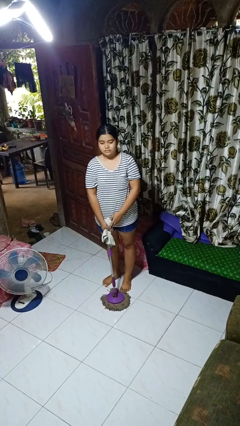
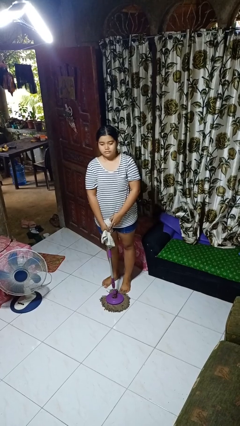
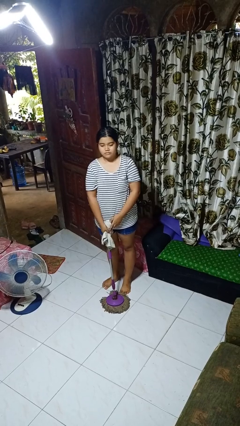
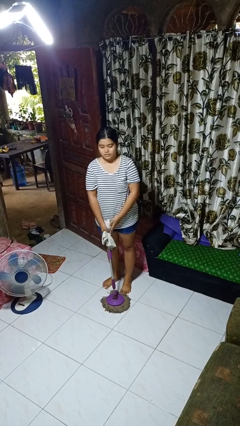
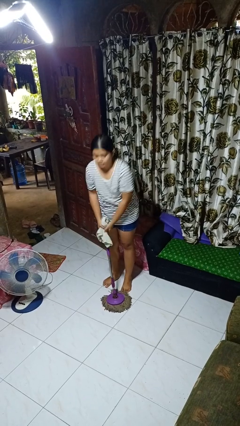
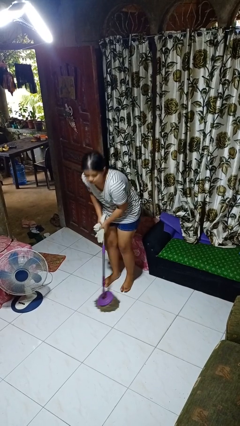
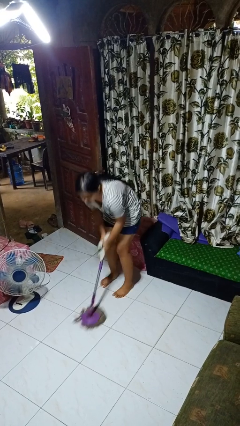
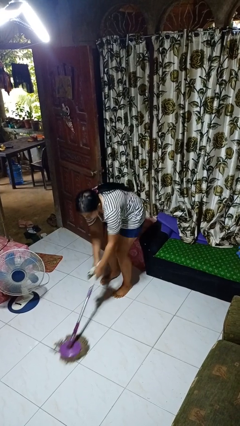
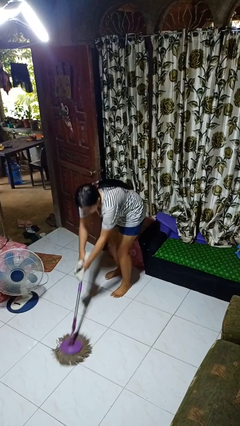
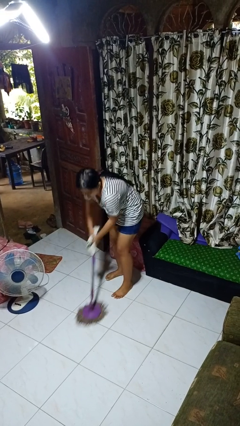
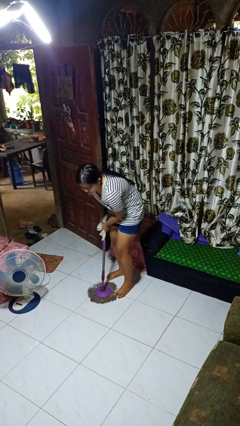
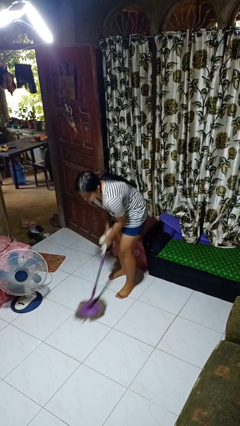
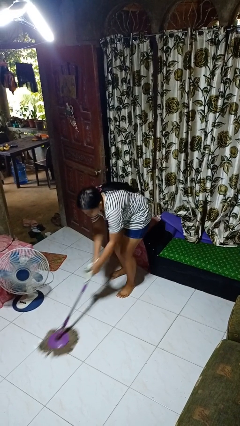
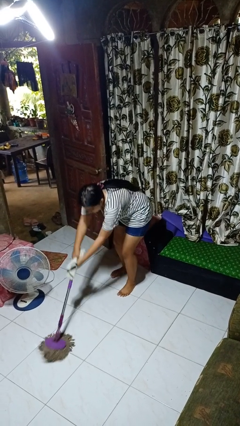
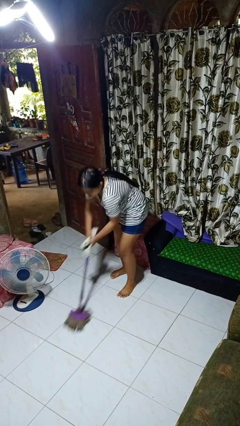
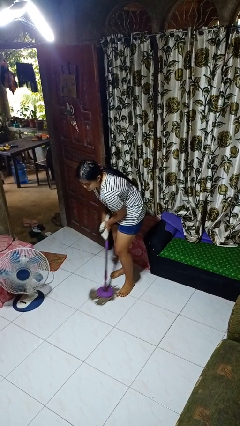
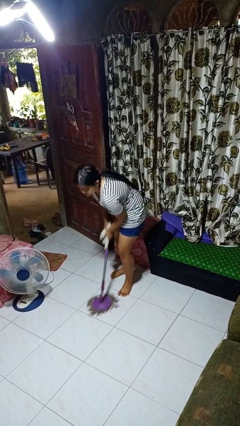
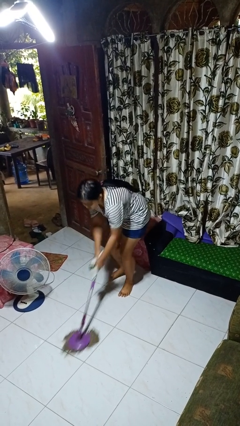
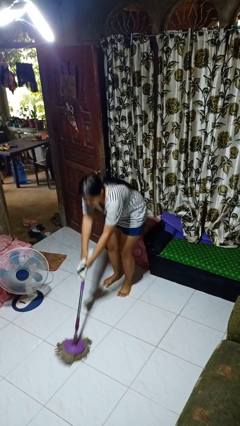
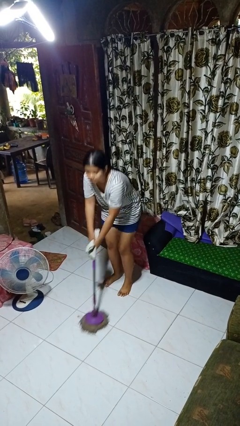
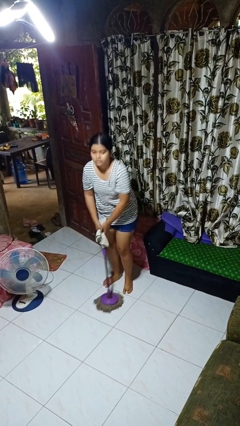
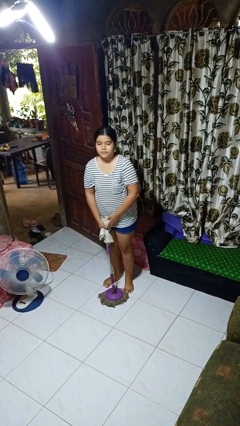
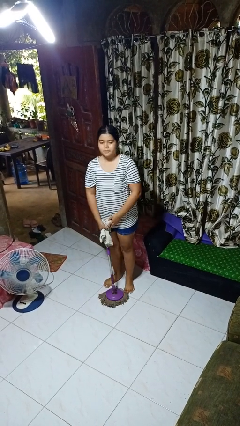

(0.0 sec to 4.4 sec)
person mops

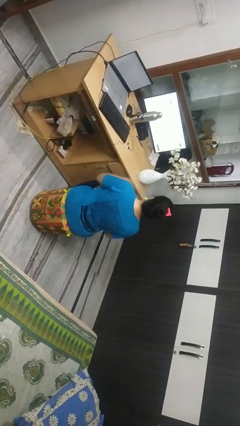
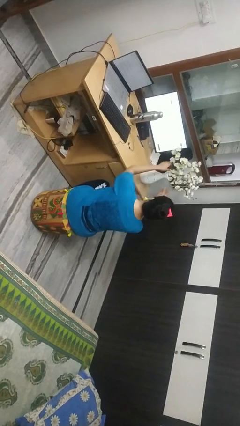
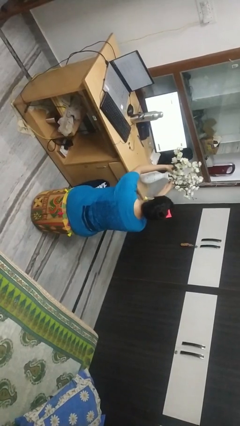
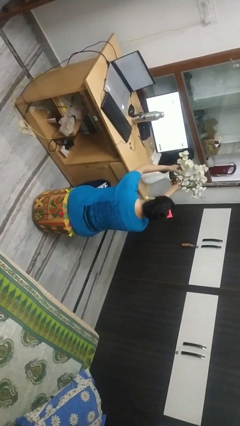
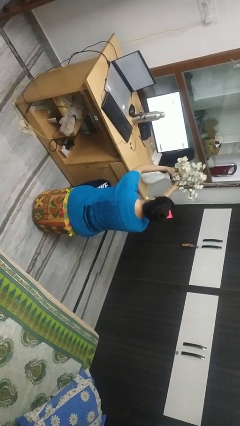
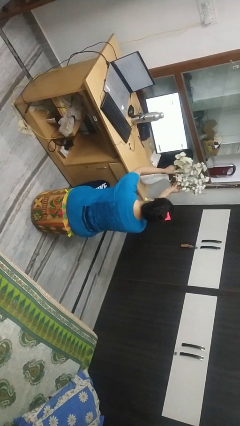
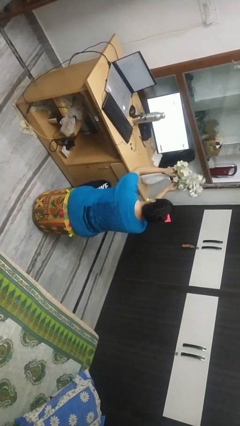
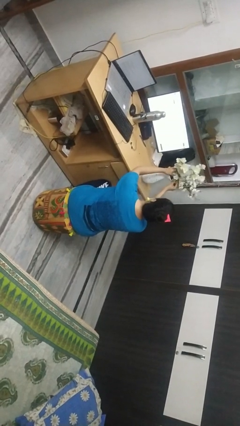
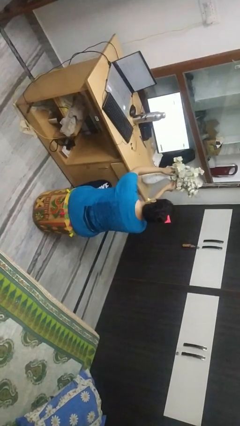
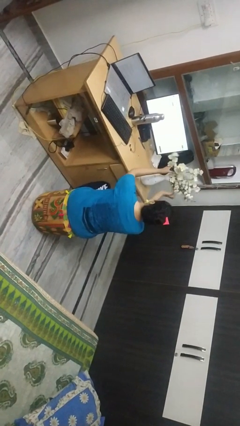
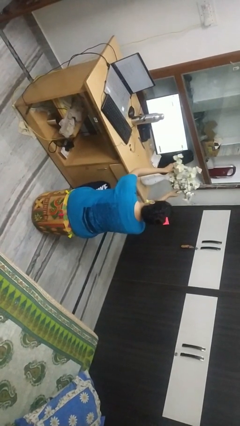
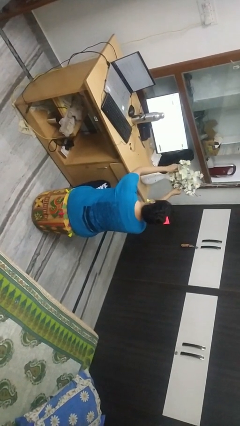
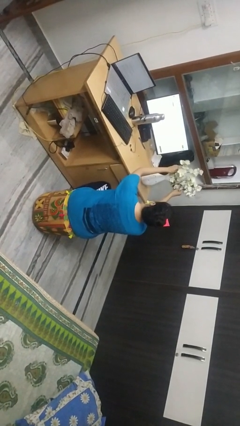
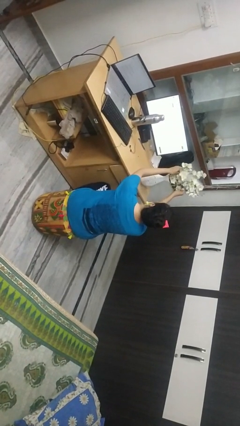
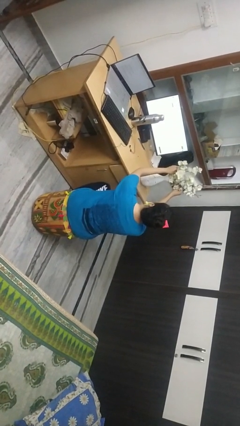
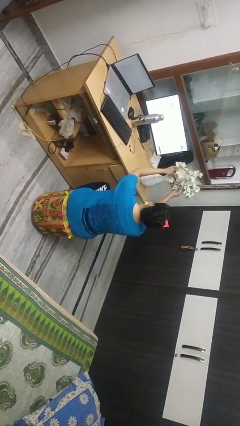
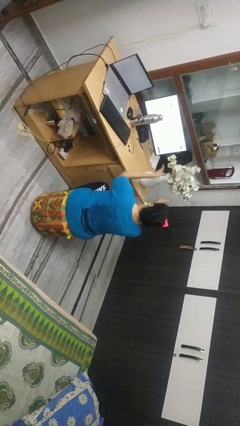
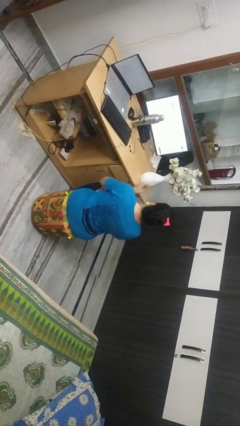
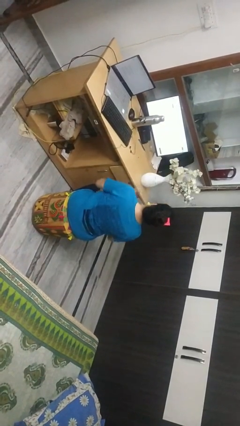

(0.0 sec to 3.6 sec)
person arranges flowers in vase

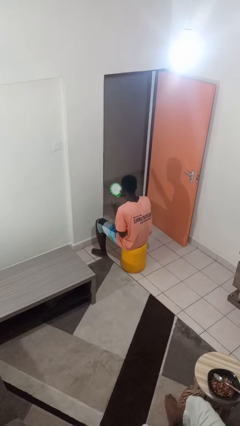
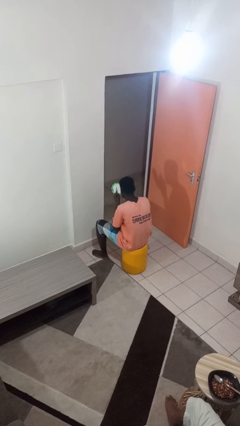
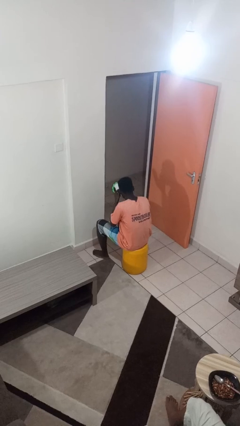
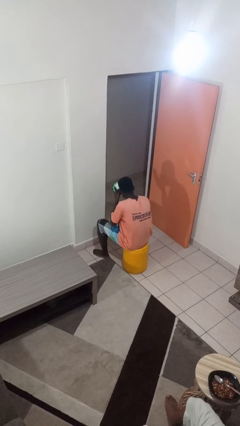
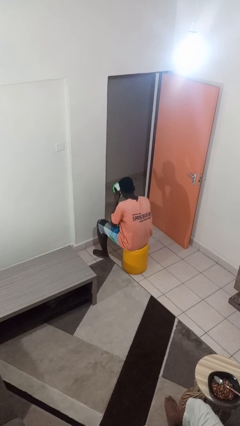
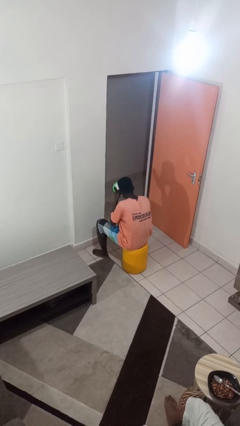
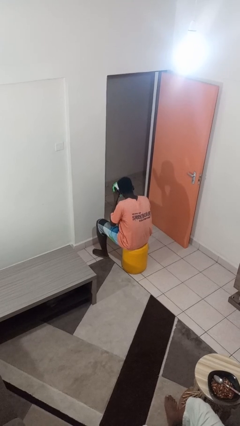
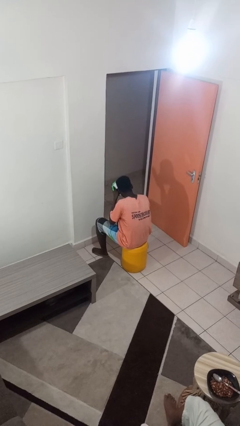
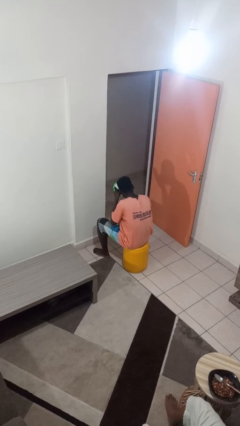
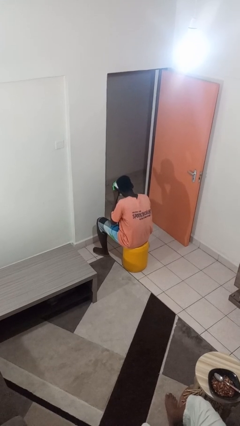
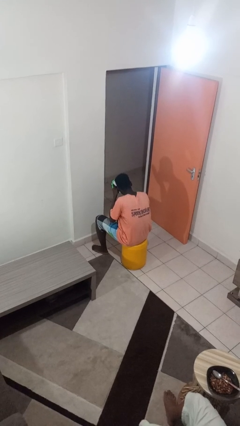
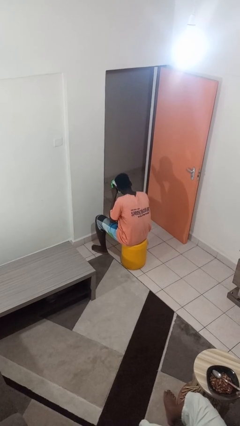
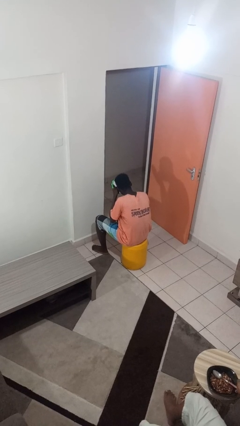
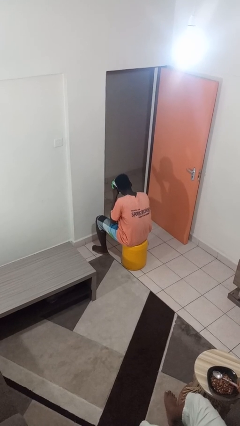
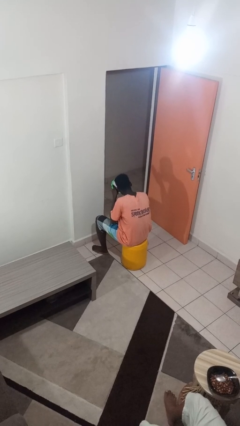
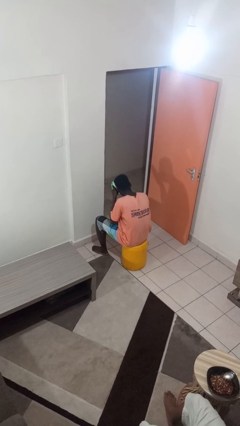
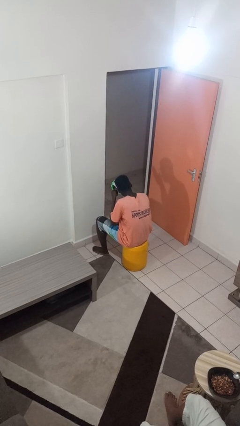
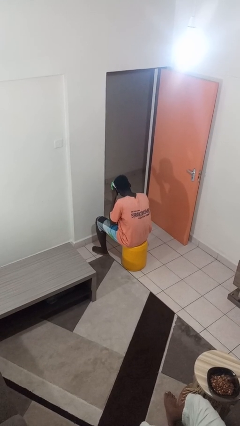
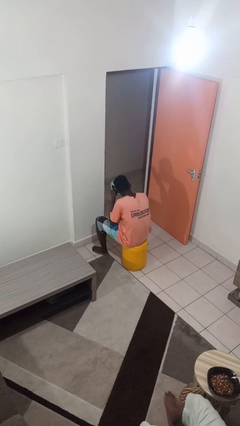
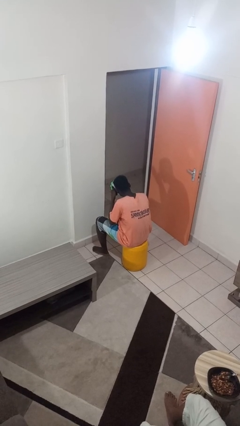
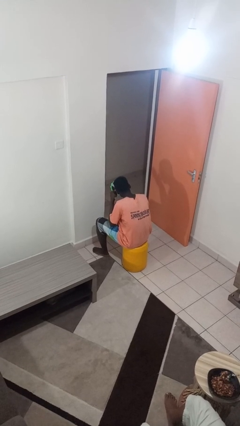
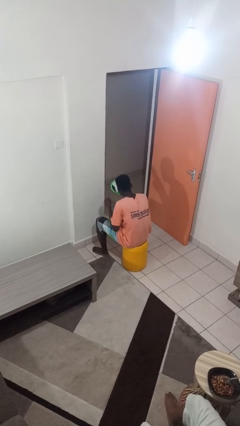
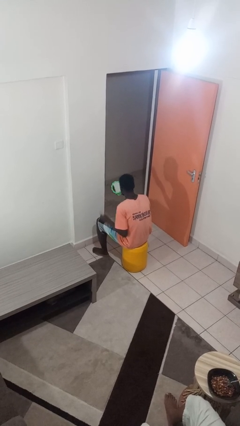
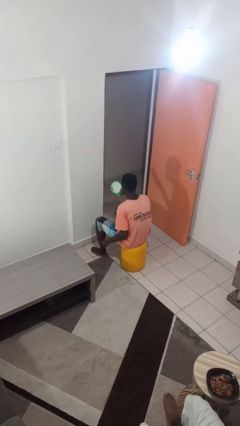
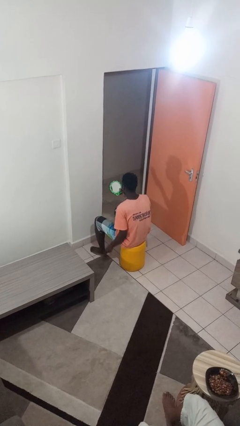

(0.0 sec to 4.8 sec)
person applies eye makeup

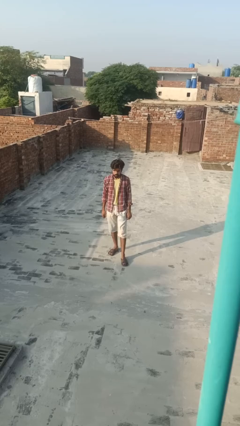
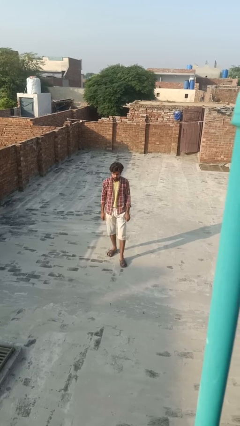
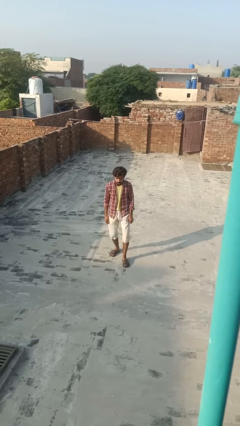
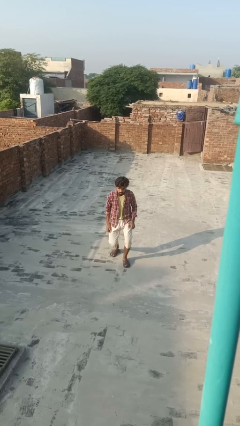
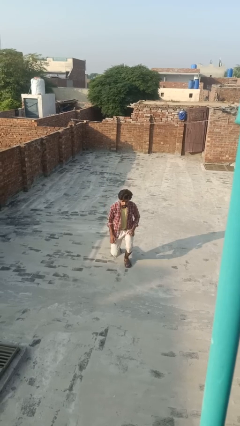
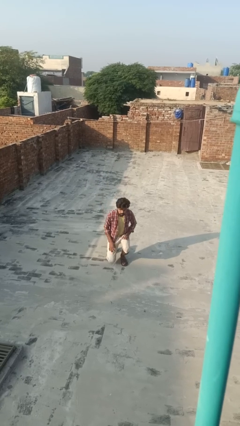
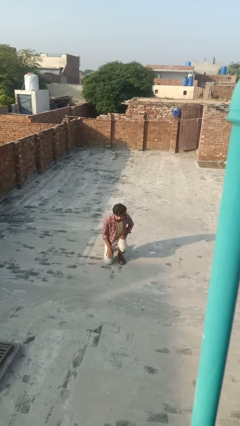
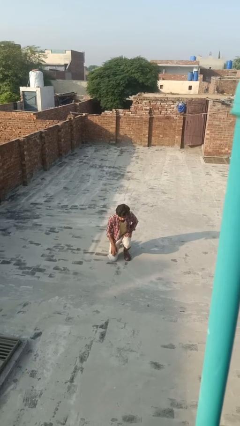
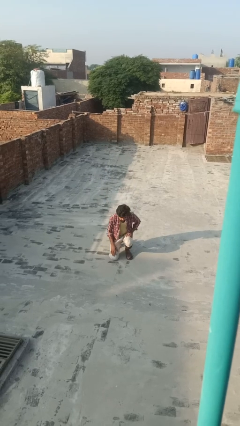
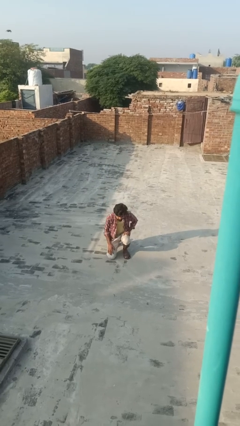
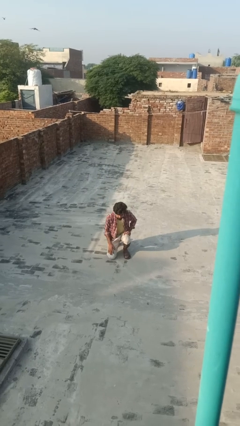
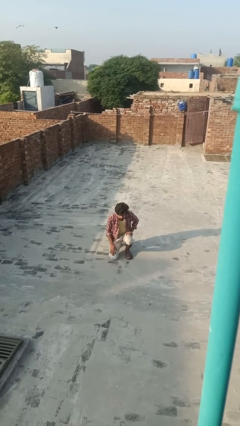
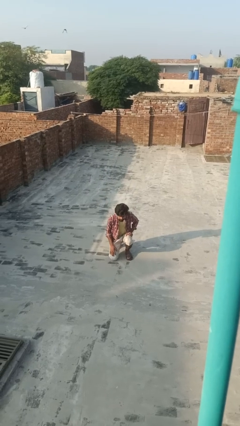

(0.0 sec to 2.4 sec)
person squats

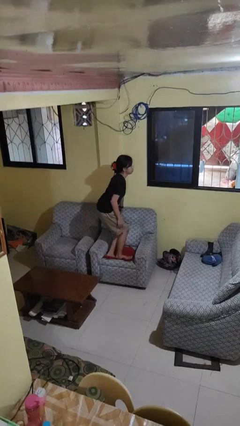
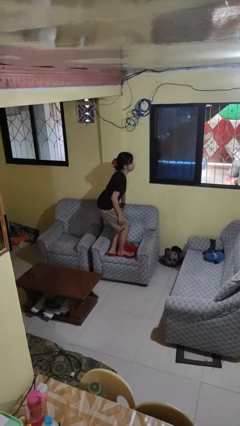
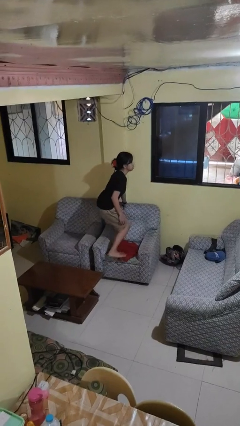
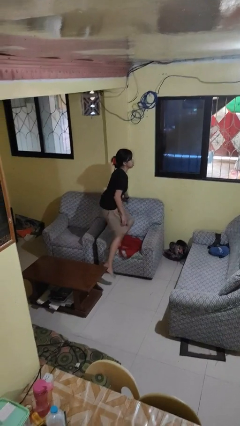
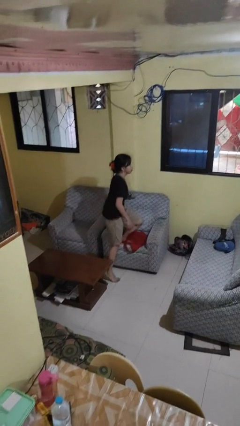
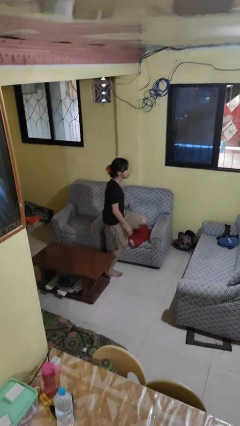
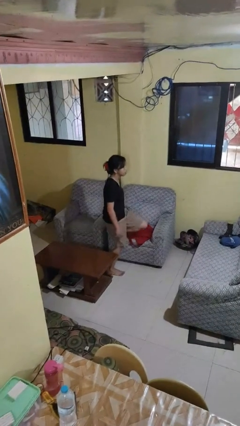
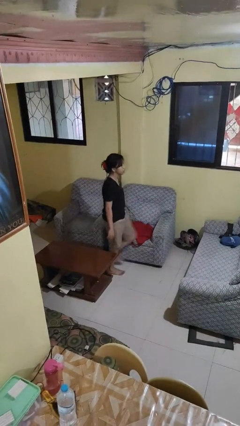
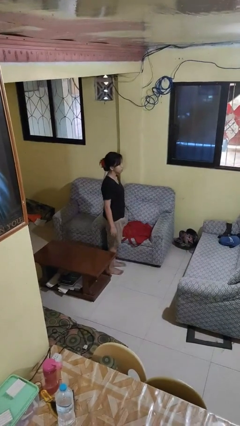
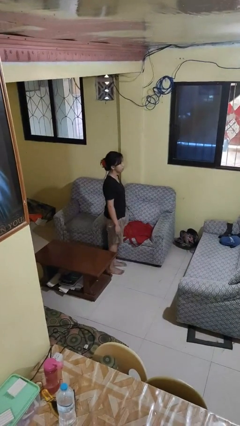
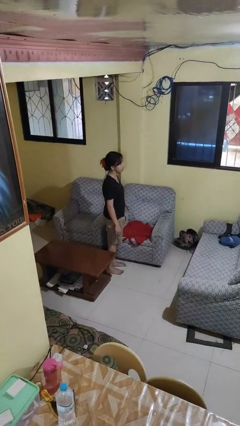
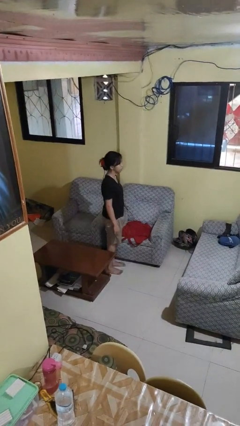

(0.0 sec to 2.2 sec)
person climbs off couch

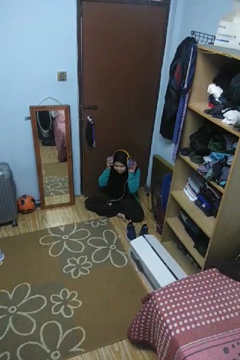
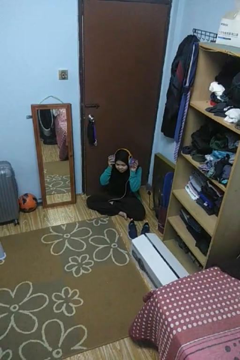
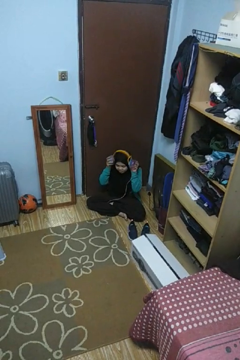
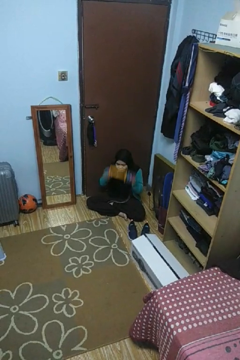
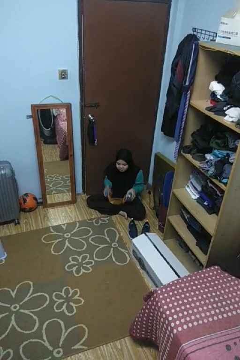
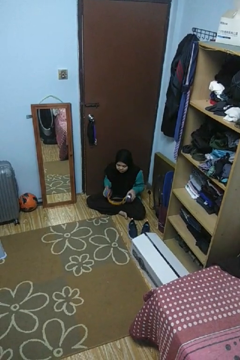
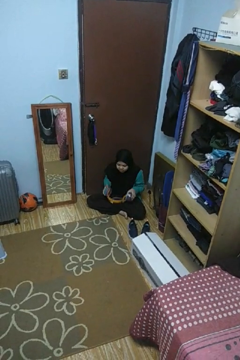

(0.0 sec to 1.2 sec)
person takes off headphones
